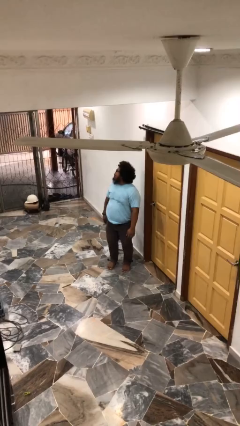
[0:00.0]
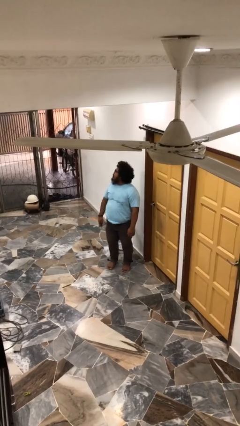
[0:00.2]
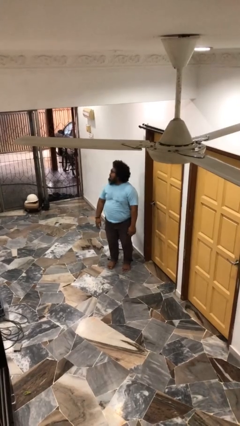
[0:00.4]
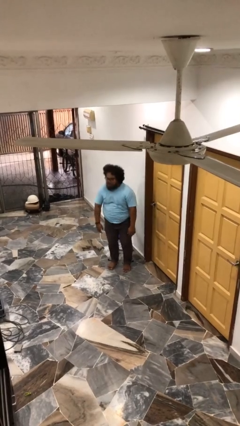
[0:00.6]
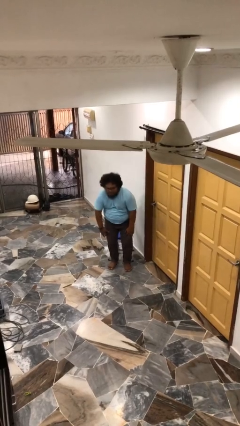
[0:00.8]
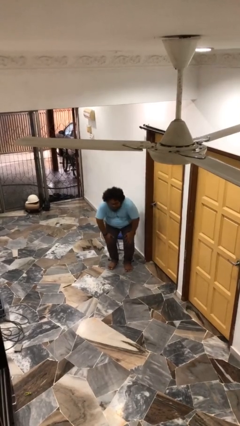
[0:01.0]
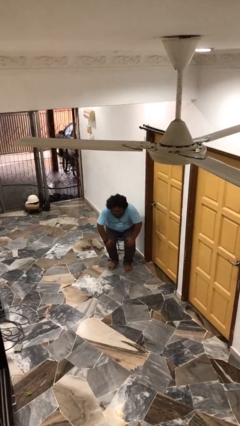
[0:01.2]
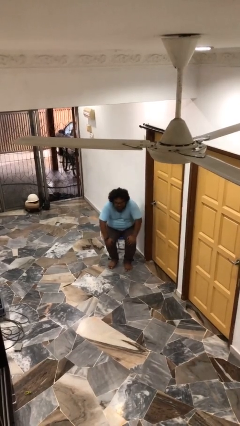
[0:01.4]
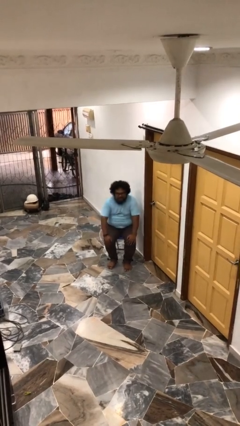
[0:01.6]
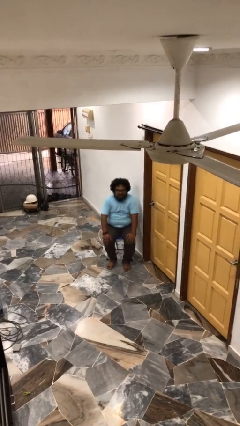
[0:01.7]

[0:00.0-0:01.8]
person sits down

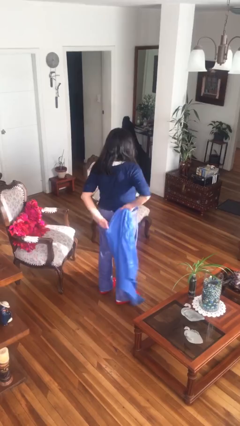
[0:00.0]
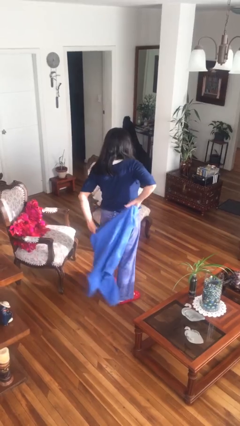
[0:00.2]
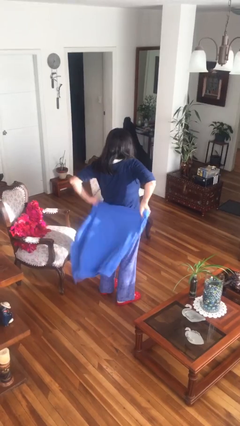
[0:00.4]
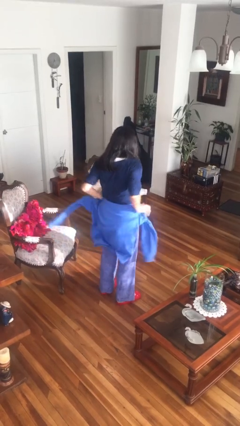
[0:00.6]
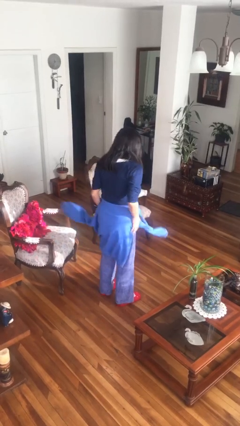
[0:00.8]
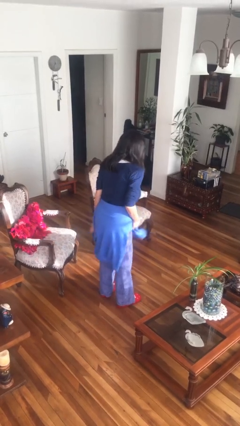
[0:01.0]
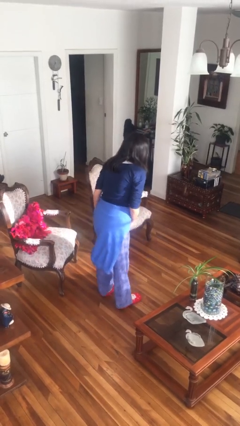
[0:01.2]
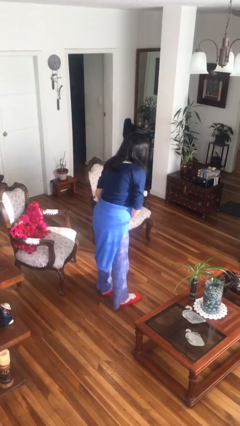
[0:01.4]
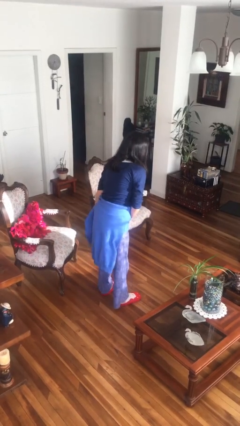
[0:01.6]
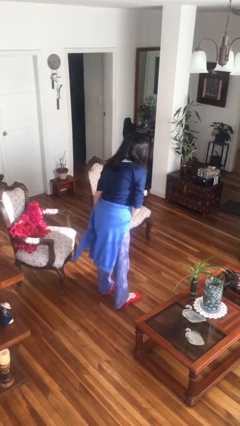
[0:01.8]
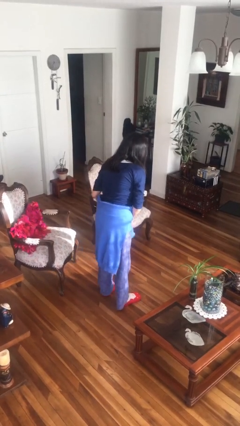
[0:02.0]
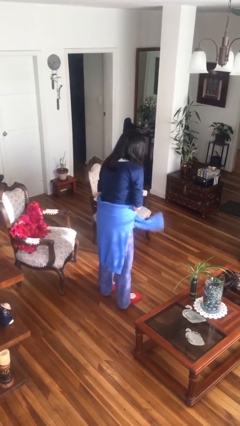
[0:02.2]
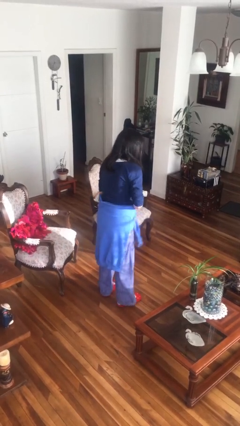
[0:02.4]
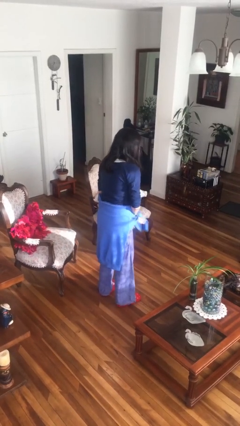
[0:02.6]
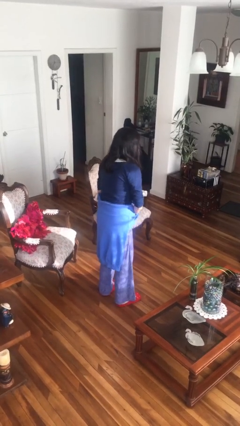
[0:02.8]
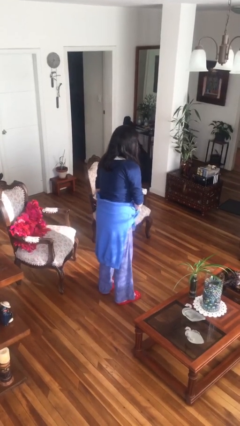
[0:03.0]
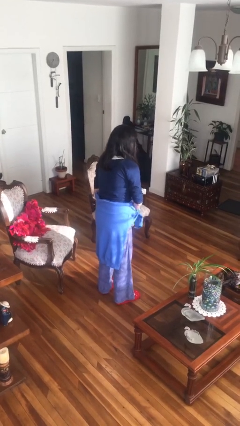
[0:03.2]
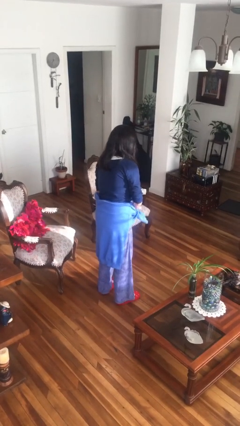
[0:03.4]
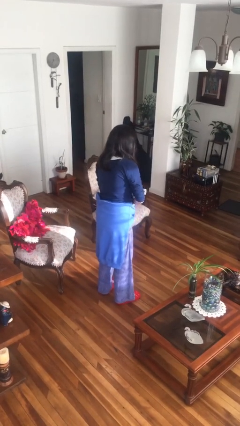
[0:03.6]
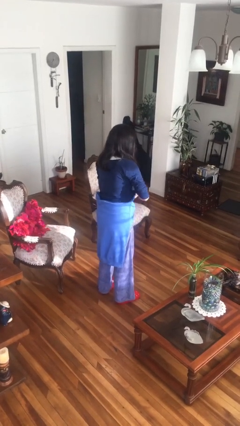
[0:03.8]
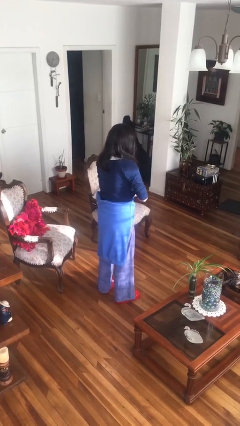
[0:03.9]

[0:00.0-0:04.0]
person ties jacket around waist

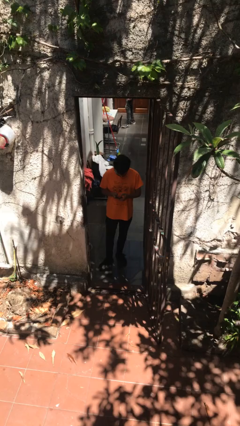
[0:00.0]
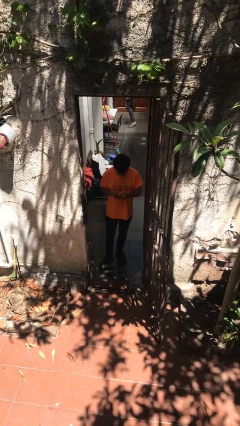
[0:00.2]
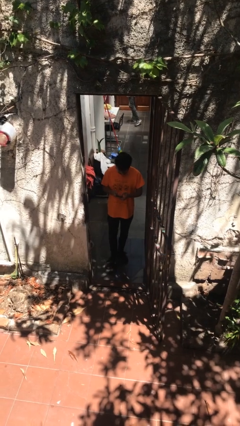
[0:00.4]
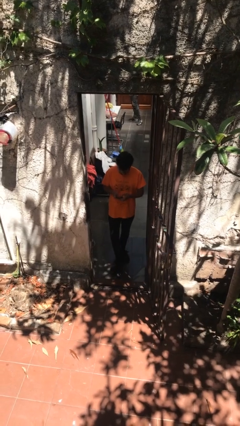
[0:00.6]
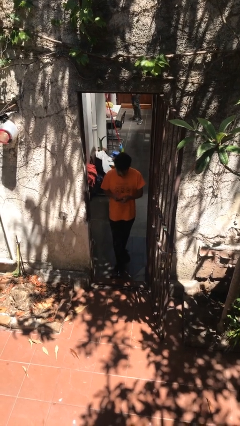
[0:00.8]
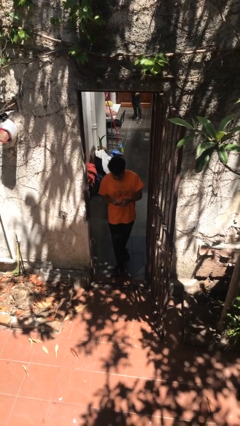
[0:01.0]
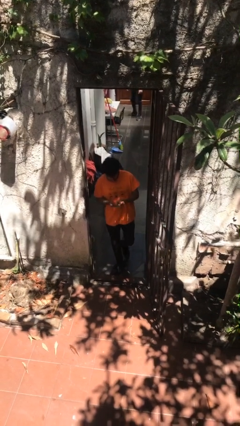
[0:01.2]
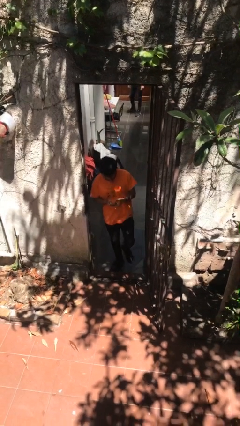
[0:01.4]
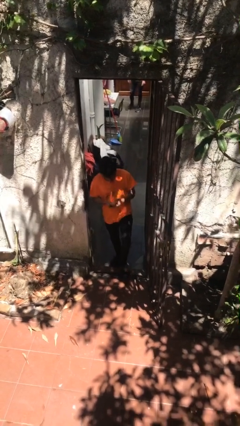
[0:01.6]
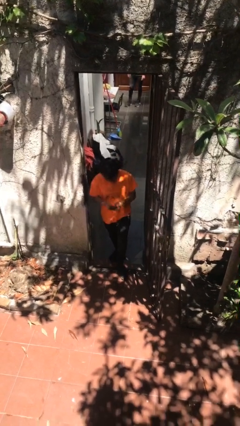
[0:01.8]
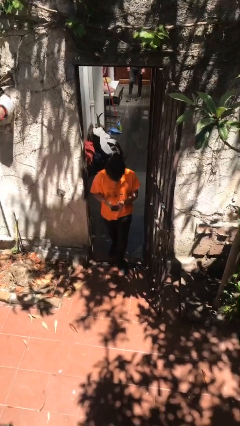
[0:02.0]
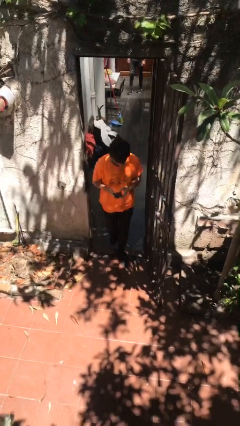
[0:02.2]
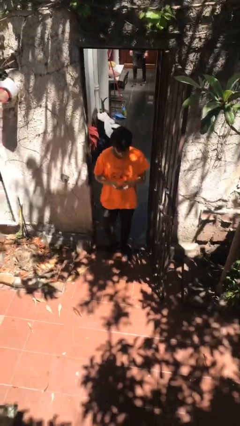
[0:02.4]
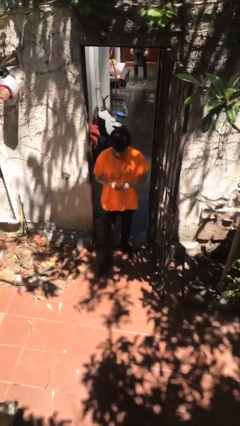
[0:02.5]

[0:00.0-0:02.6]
person enters scene through structure

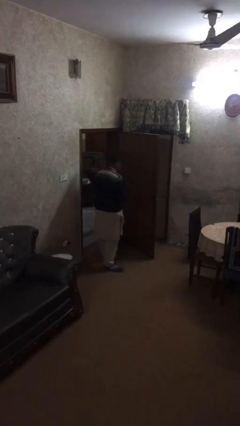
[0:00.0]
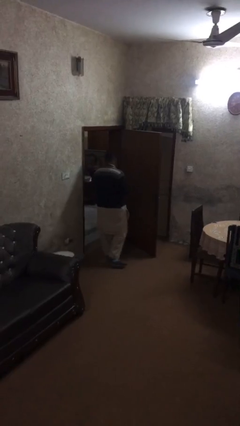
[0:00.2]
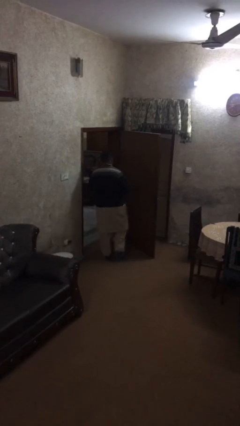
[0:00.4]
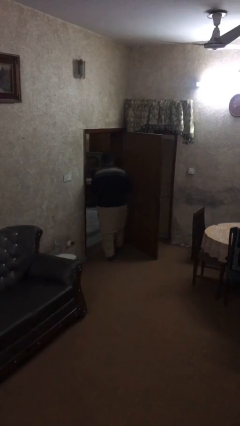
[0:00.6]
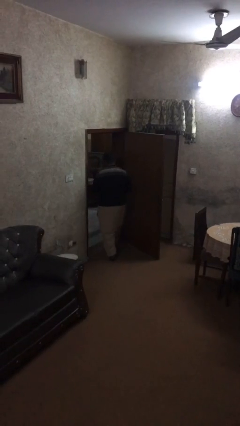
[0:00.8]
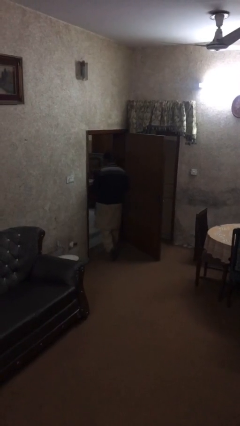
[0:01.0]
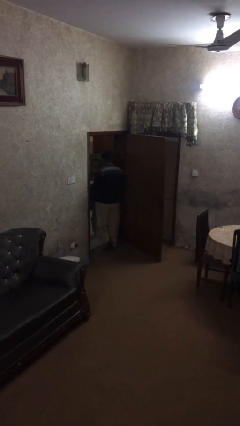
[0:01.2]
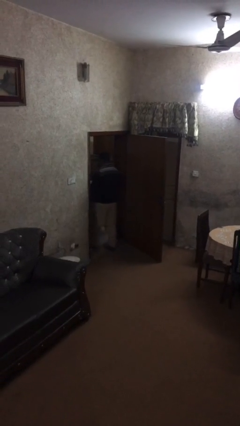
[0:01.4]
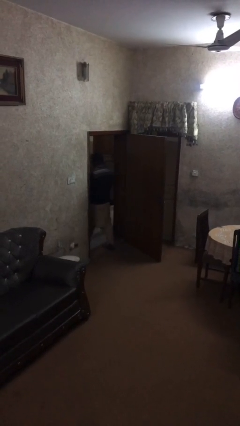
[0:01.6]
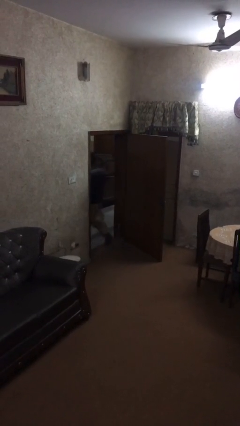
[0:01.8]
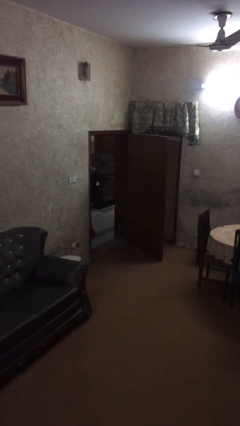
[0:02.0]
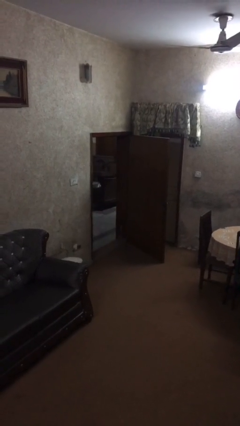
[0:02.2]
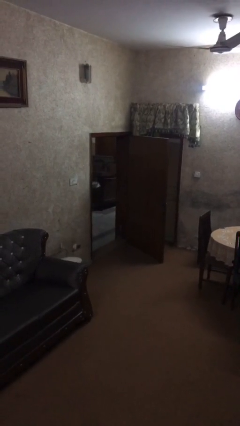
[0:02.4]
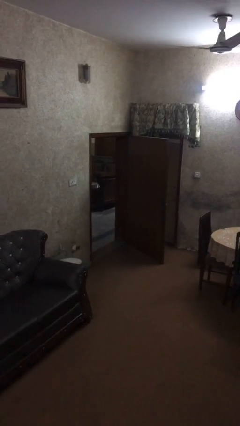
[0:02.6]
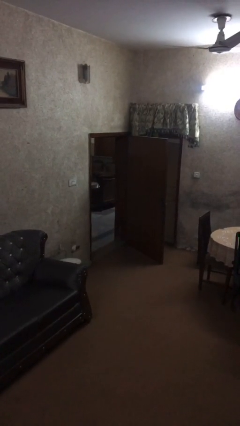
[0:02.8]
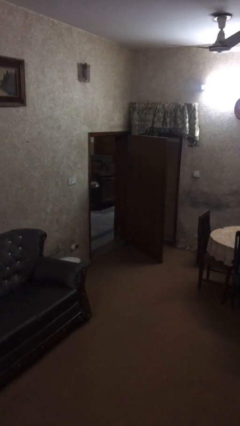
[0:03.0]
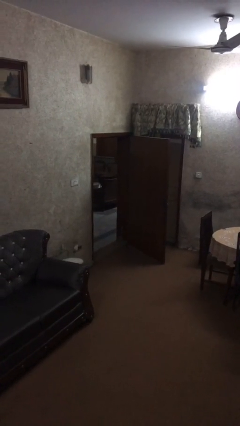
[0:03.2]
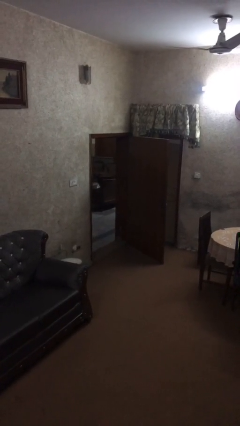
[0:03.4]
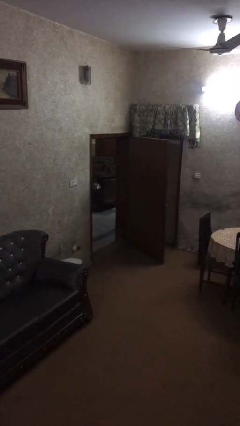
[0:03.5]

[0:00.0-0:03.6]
person exits scene through structure

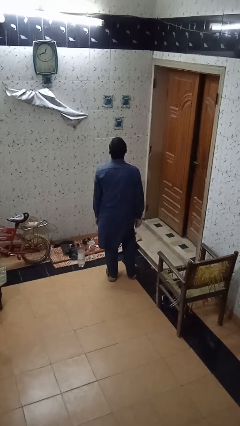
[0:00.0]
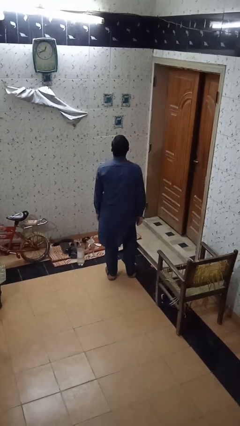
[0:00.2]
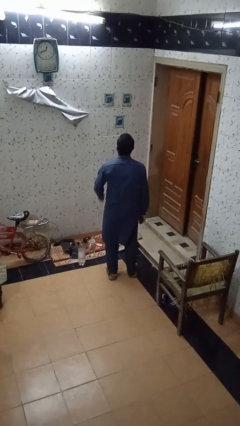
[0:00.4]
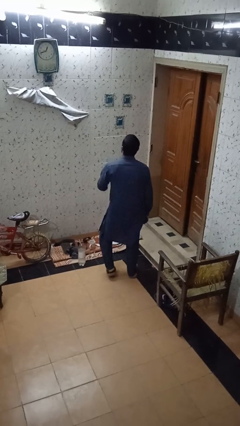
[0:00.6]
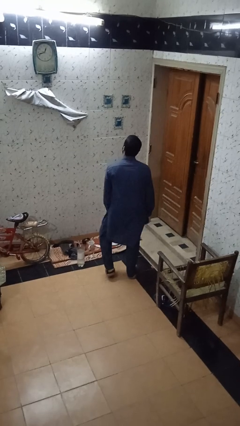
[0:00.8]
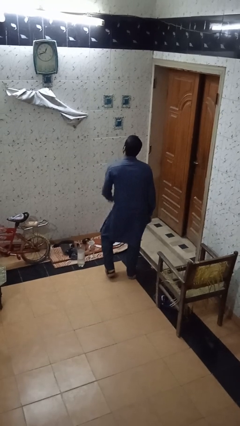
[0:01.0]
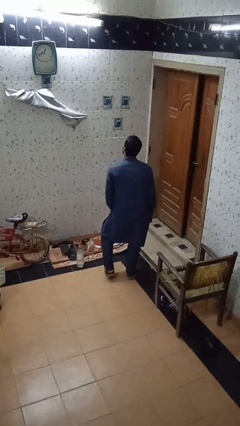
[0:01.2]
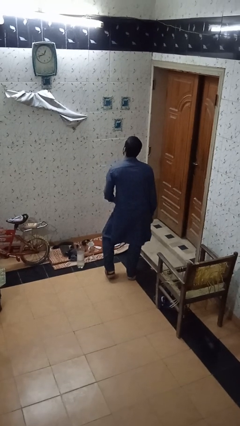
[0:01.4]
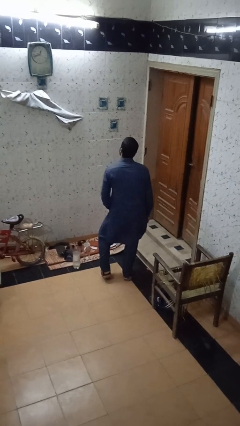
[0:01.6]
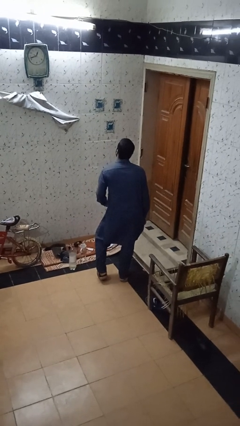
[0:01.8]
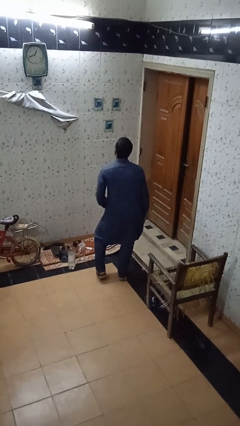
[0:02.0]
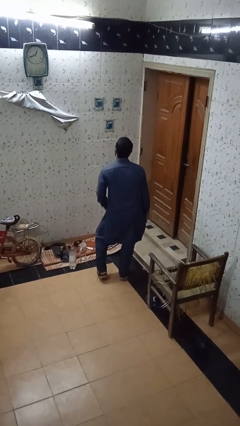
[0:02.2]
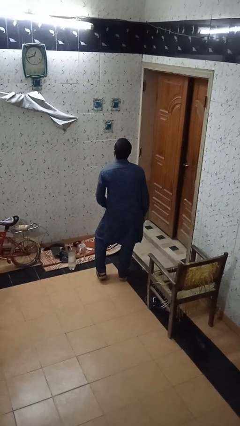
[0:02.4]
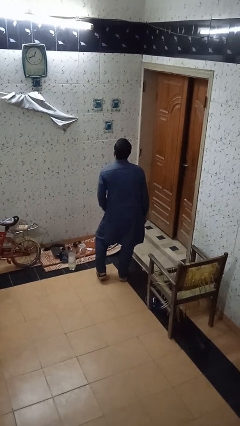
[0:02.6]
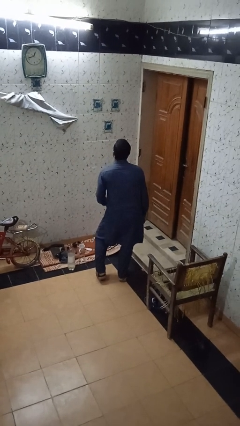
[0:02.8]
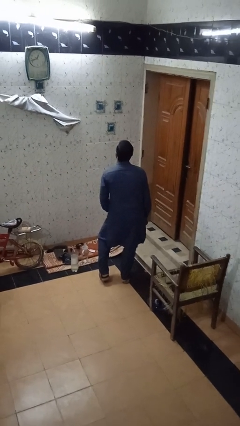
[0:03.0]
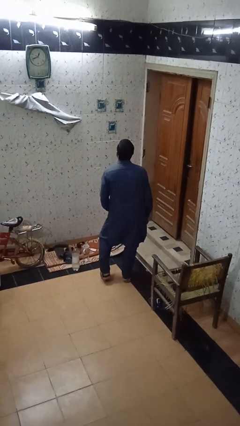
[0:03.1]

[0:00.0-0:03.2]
person slaps hands on thighs

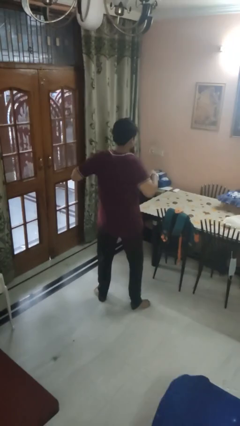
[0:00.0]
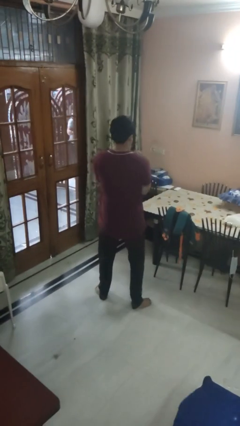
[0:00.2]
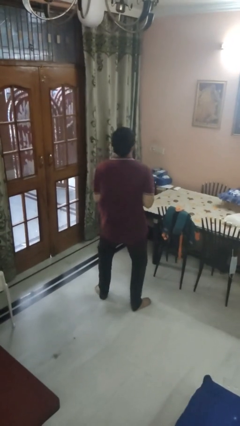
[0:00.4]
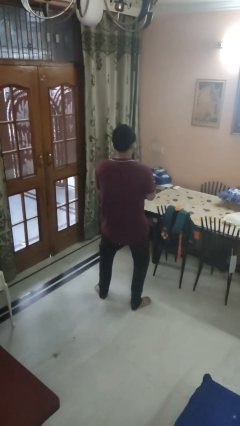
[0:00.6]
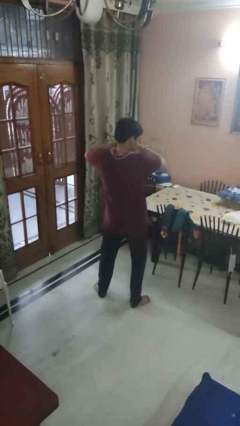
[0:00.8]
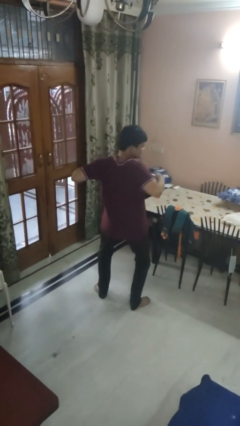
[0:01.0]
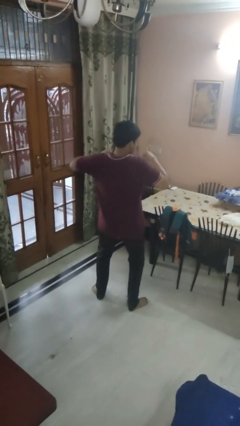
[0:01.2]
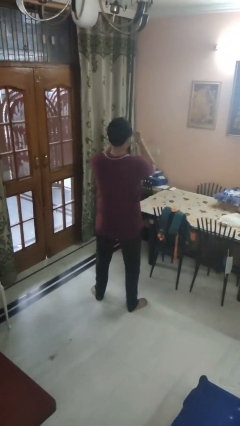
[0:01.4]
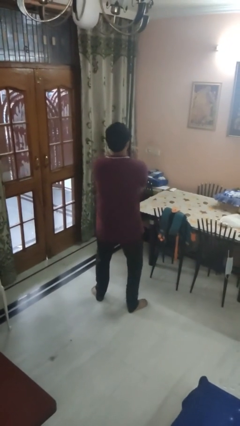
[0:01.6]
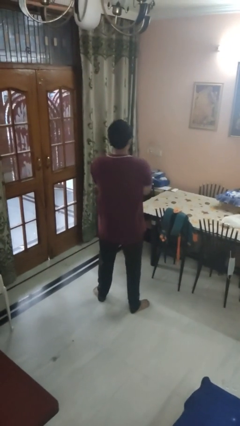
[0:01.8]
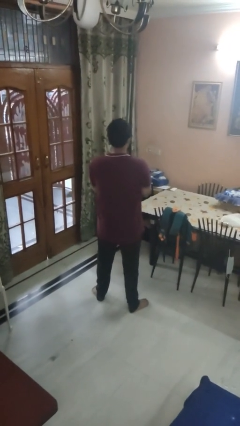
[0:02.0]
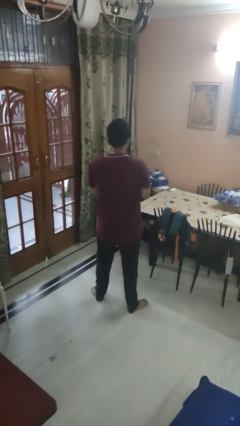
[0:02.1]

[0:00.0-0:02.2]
person dances in place
